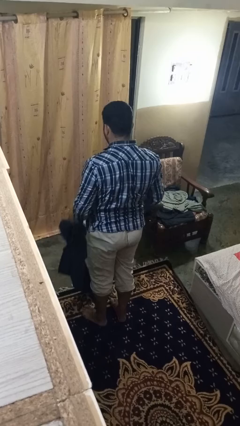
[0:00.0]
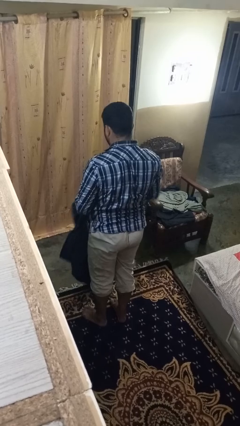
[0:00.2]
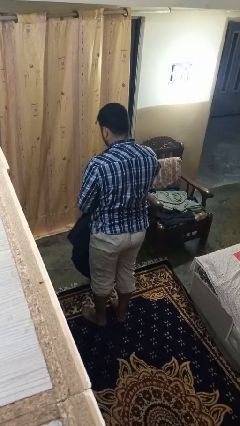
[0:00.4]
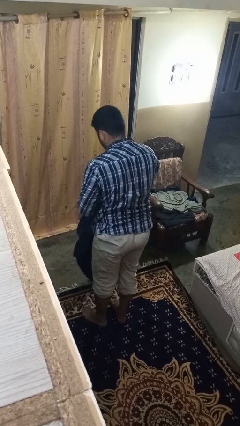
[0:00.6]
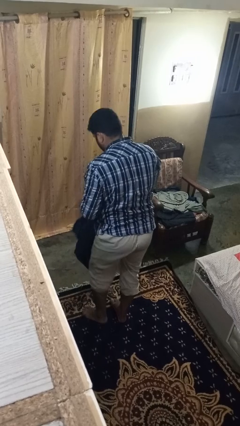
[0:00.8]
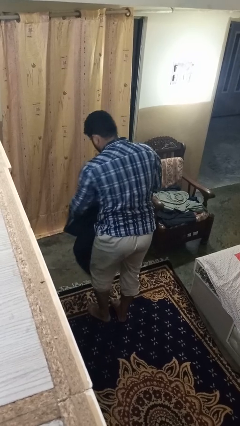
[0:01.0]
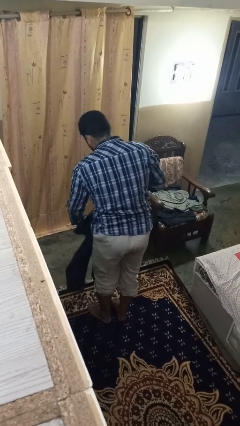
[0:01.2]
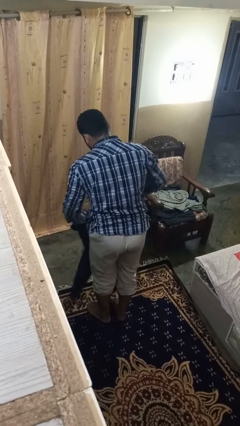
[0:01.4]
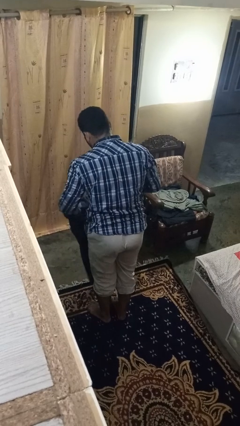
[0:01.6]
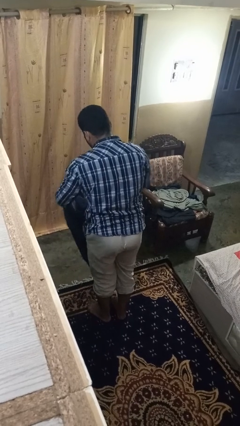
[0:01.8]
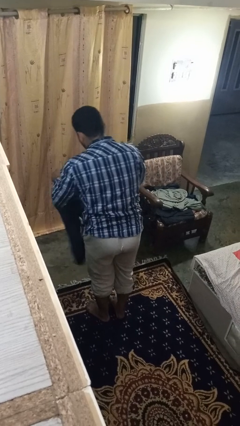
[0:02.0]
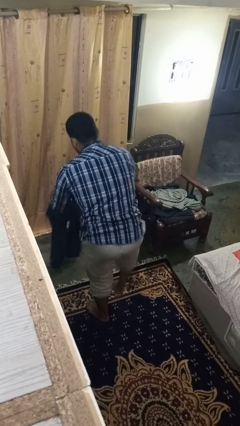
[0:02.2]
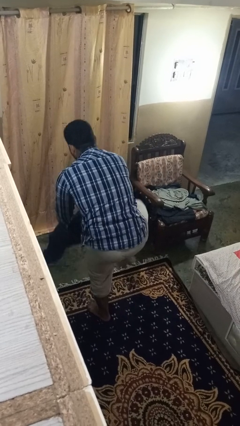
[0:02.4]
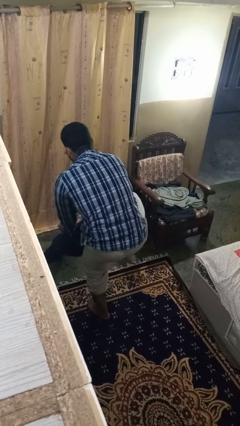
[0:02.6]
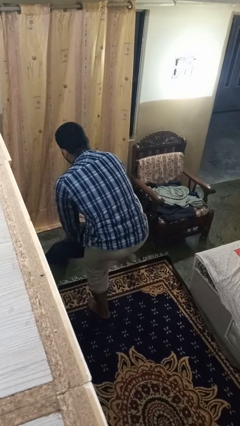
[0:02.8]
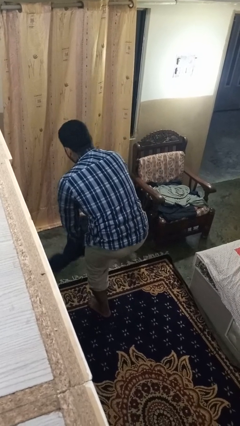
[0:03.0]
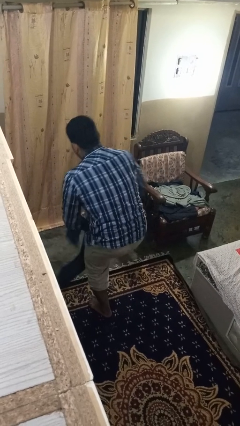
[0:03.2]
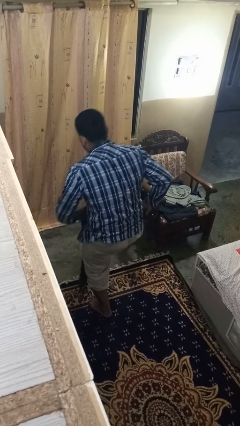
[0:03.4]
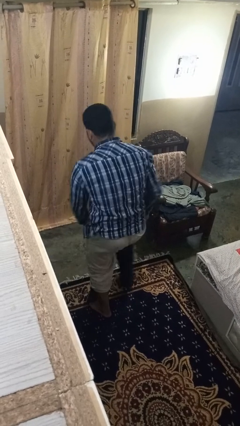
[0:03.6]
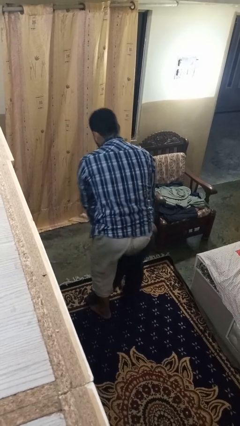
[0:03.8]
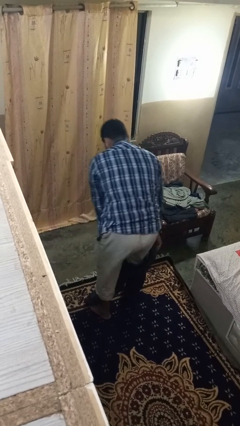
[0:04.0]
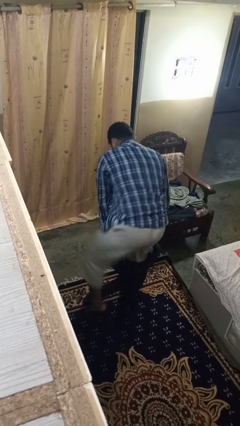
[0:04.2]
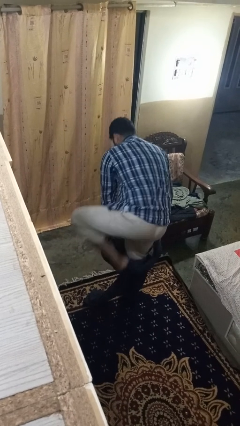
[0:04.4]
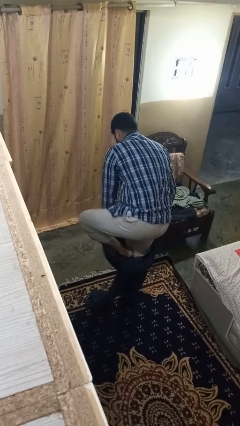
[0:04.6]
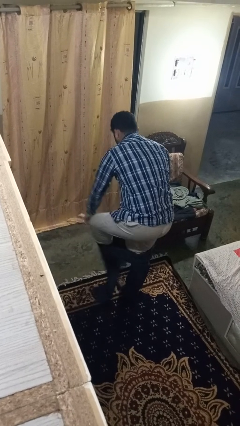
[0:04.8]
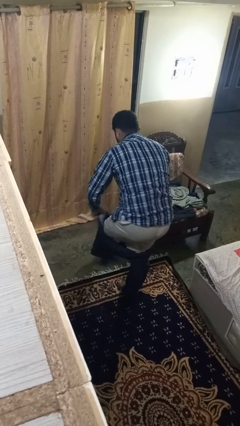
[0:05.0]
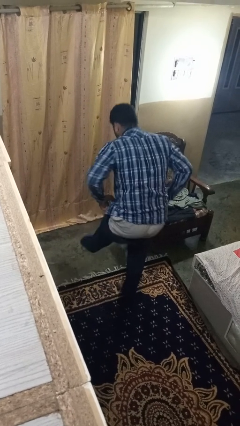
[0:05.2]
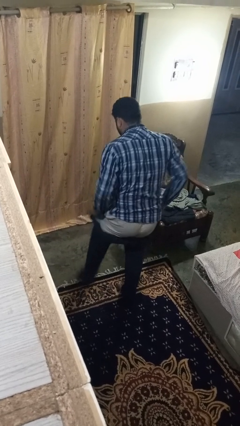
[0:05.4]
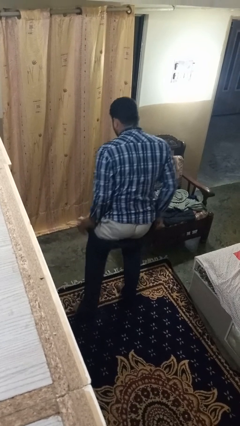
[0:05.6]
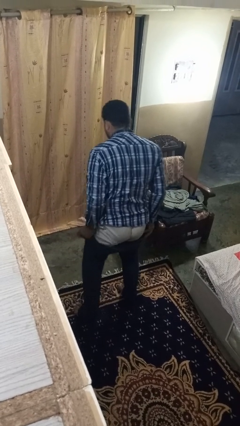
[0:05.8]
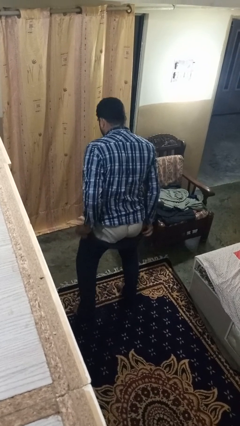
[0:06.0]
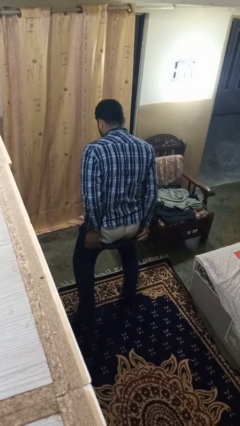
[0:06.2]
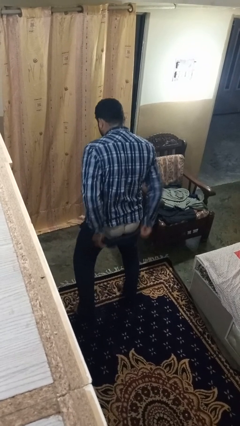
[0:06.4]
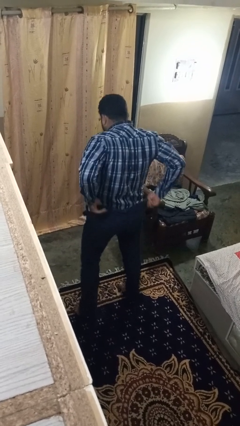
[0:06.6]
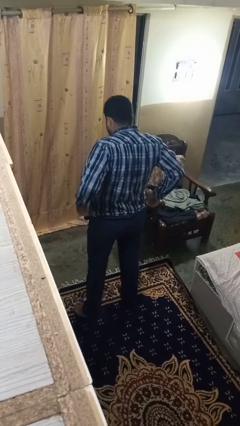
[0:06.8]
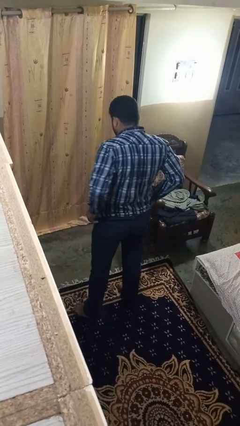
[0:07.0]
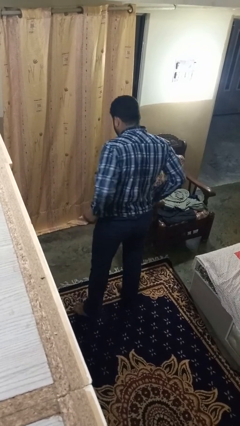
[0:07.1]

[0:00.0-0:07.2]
person puts on pants

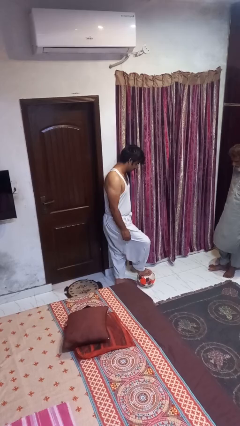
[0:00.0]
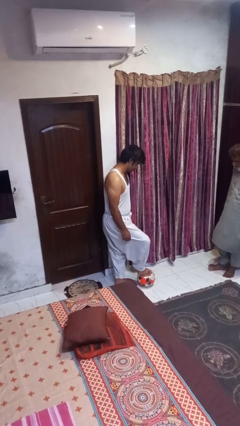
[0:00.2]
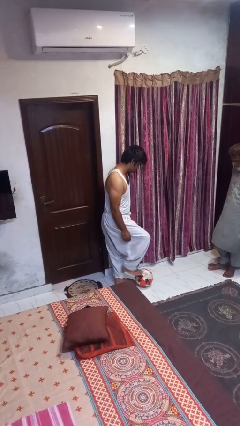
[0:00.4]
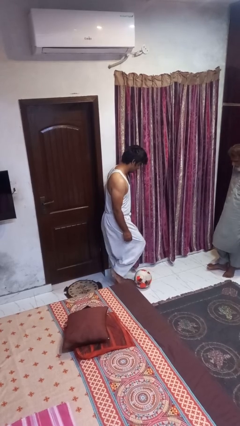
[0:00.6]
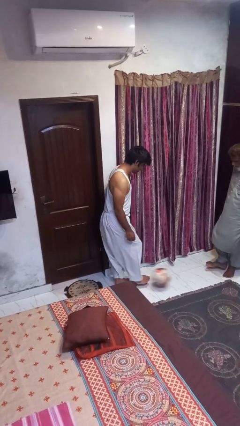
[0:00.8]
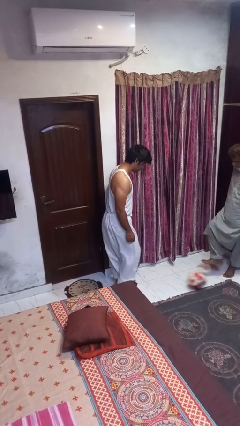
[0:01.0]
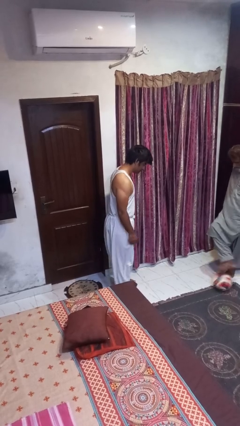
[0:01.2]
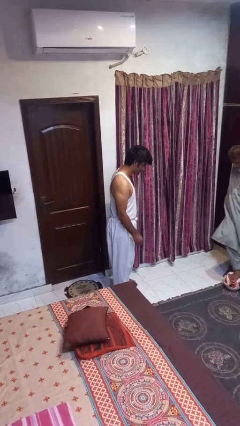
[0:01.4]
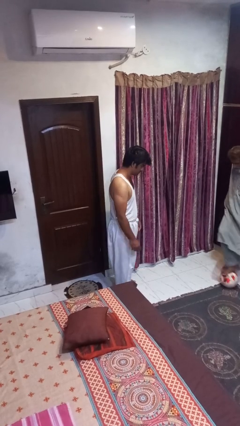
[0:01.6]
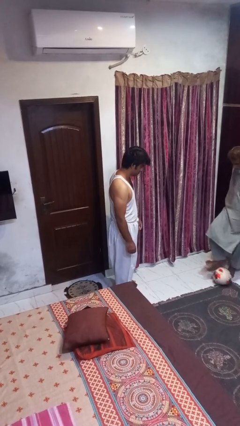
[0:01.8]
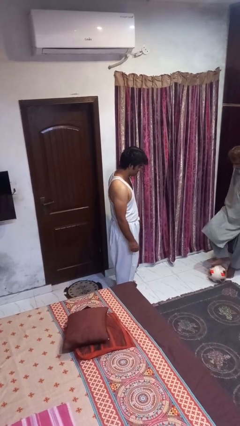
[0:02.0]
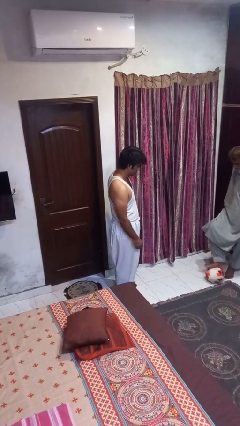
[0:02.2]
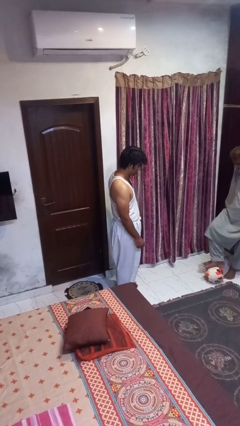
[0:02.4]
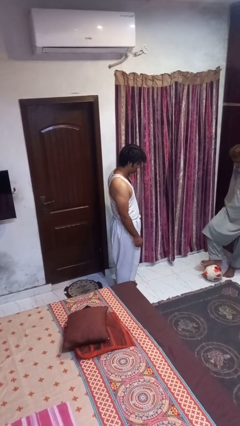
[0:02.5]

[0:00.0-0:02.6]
person kicks object to person

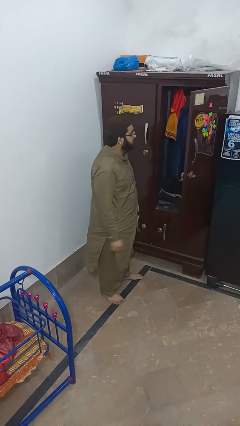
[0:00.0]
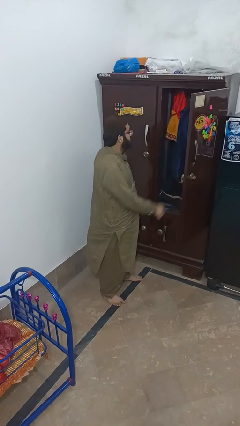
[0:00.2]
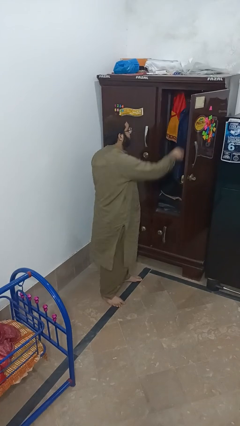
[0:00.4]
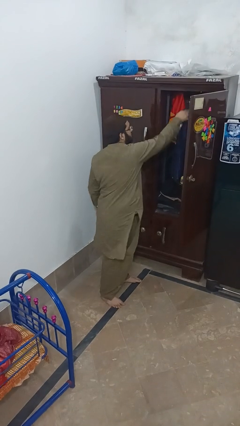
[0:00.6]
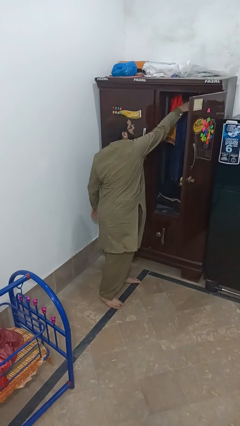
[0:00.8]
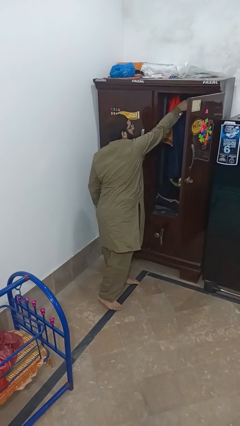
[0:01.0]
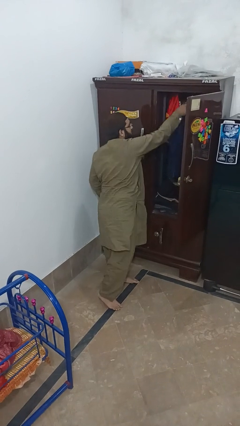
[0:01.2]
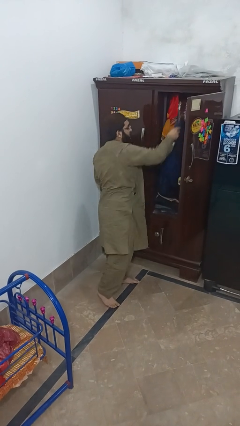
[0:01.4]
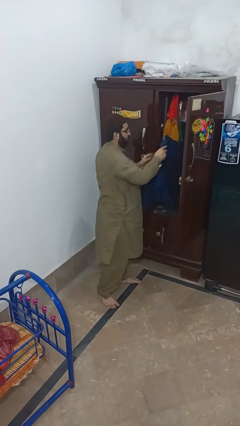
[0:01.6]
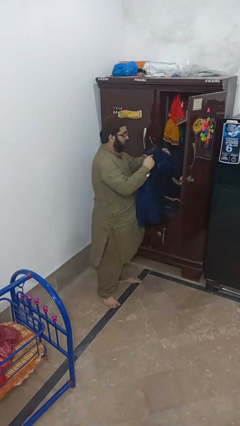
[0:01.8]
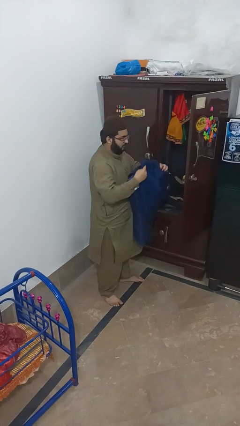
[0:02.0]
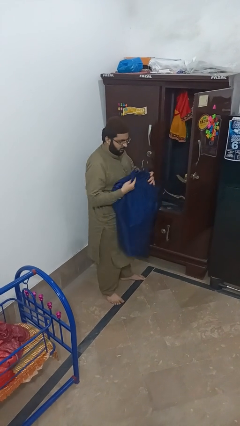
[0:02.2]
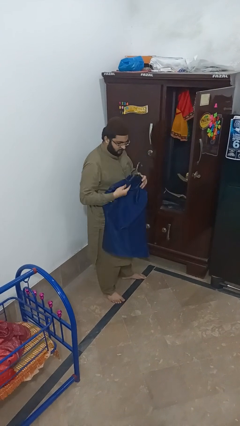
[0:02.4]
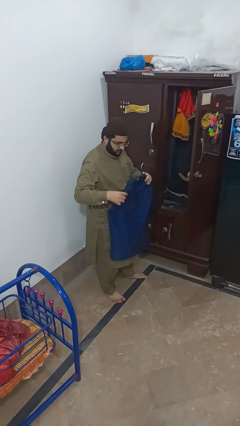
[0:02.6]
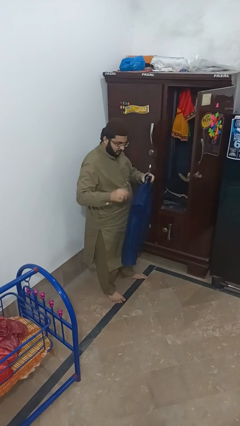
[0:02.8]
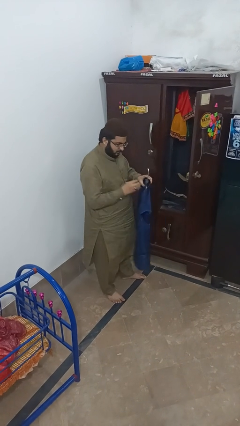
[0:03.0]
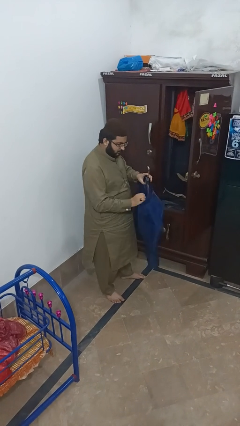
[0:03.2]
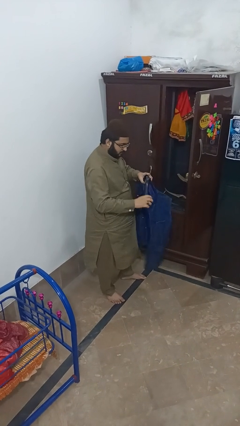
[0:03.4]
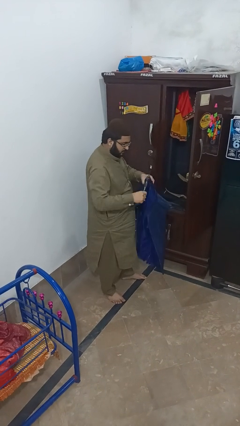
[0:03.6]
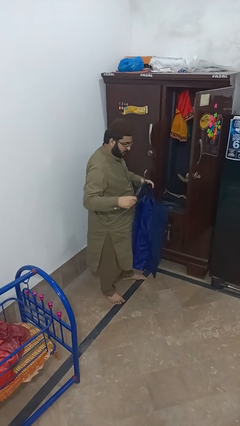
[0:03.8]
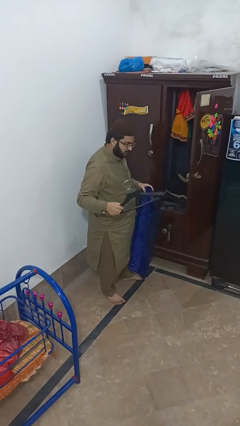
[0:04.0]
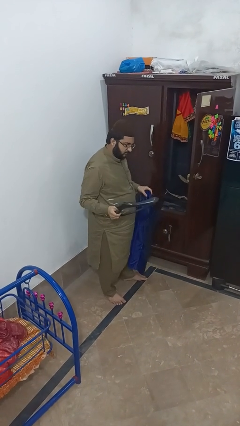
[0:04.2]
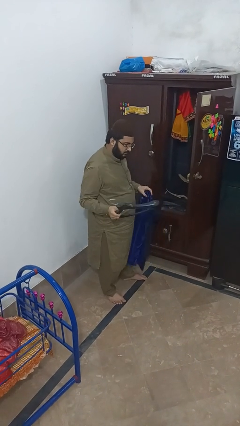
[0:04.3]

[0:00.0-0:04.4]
person takes clothes from closet

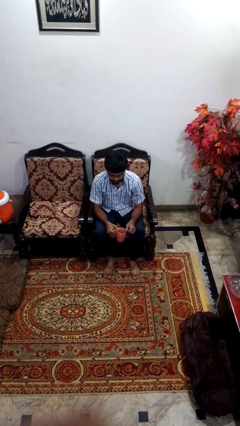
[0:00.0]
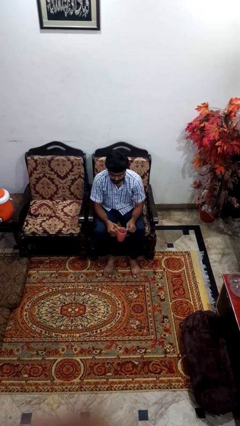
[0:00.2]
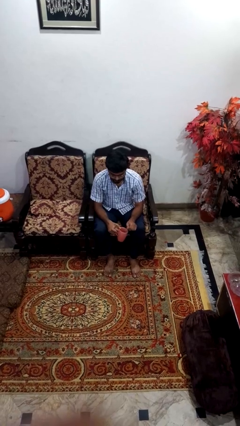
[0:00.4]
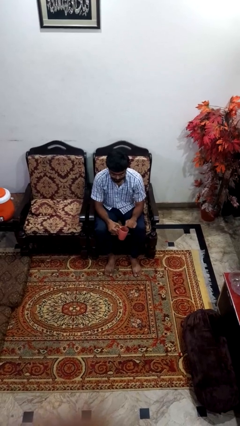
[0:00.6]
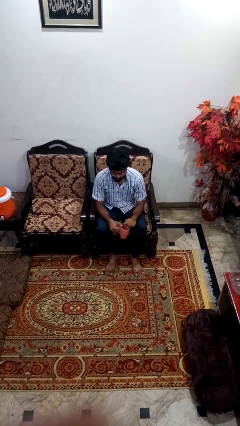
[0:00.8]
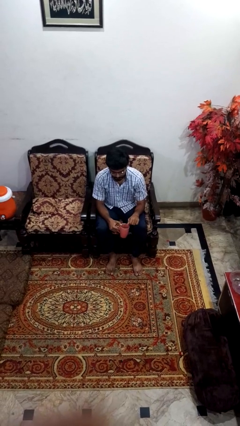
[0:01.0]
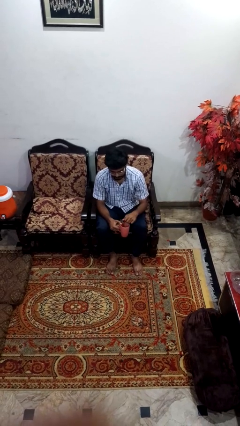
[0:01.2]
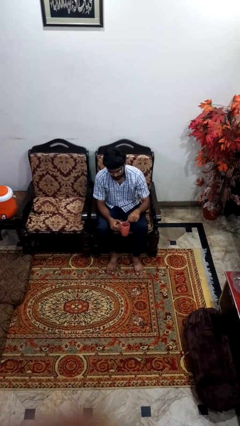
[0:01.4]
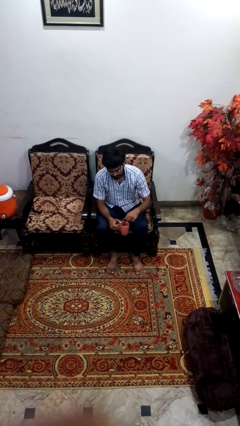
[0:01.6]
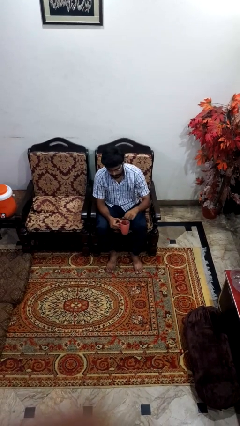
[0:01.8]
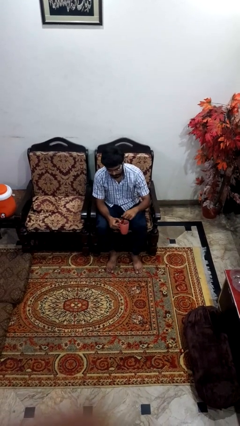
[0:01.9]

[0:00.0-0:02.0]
person stirs mug

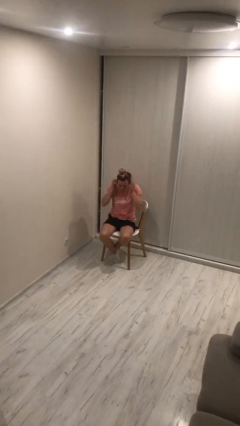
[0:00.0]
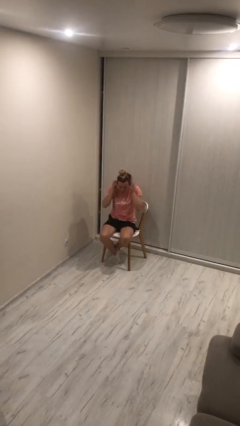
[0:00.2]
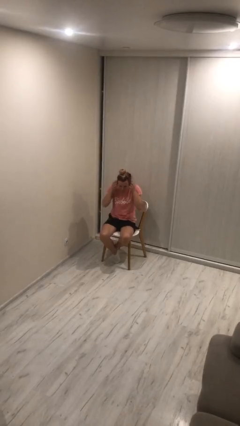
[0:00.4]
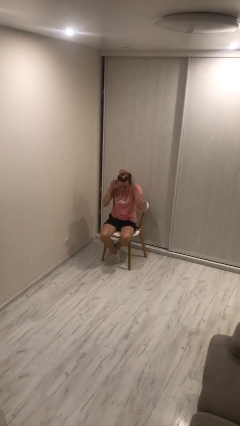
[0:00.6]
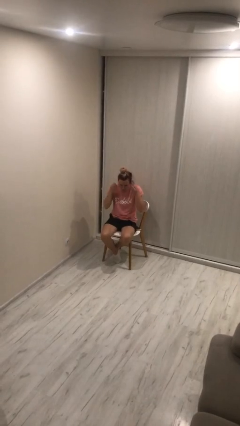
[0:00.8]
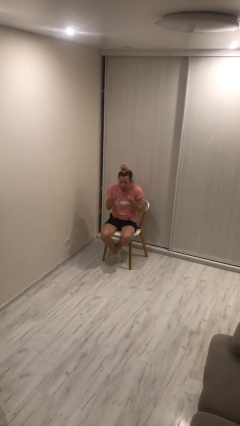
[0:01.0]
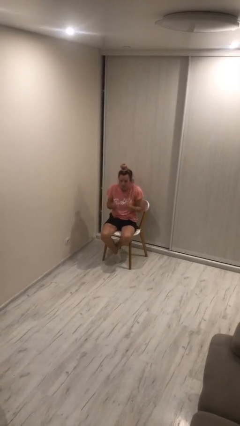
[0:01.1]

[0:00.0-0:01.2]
person takes off earrings

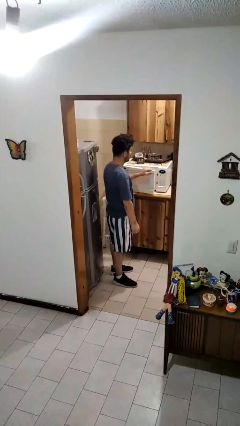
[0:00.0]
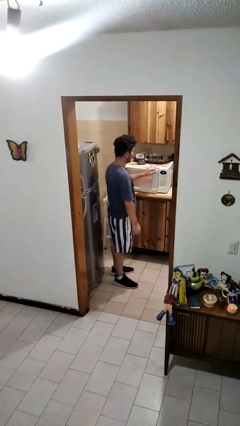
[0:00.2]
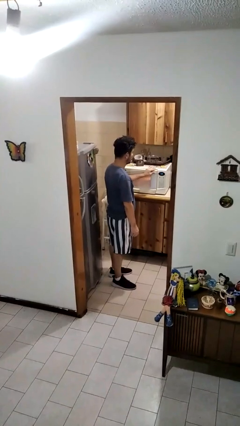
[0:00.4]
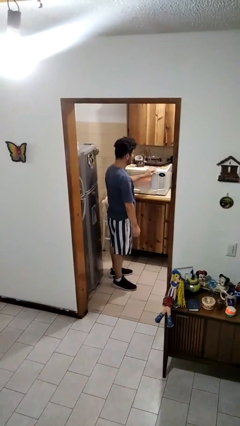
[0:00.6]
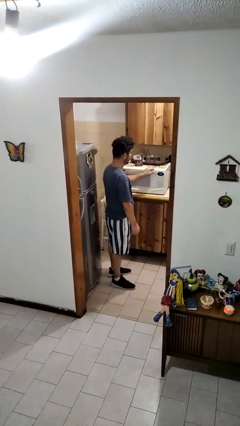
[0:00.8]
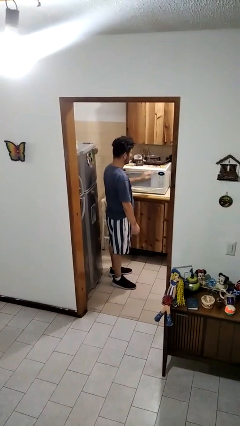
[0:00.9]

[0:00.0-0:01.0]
person closes microwave
